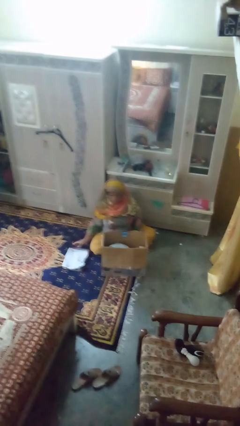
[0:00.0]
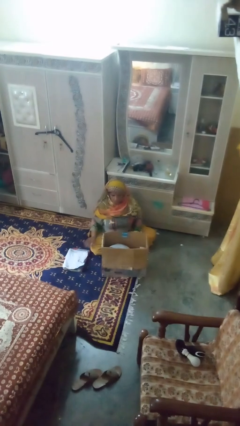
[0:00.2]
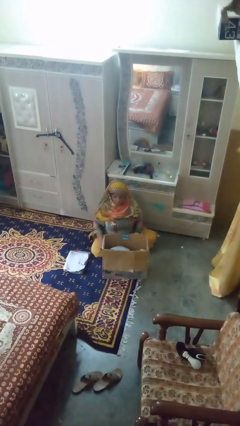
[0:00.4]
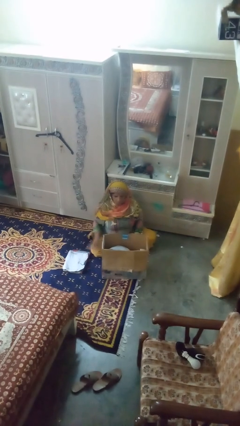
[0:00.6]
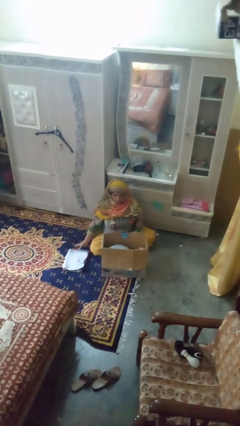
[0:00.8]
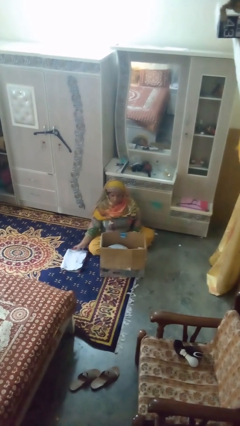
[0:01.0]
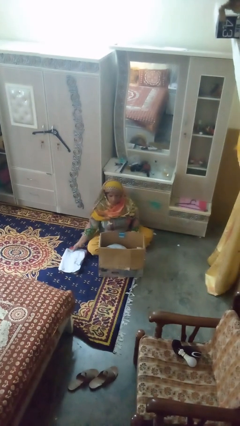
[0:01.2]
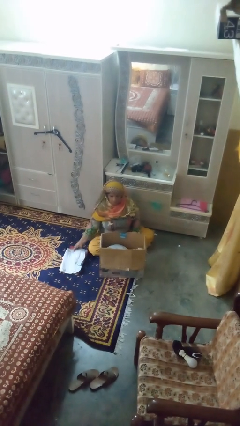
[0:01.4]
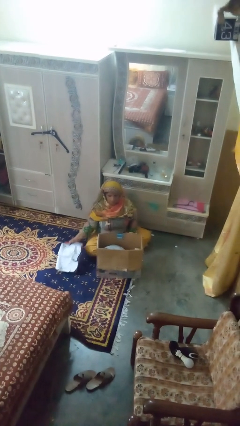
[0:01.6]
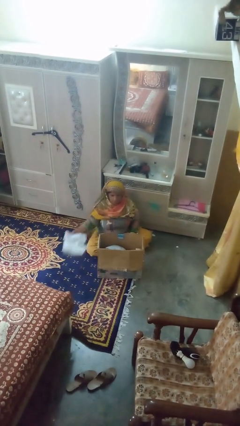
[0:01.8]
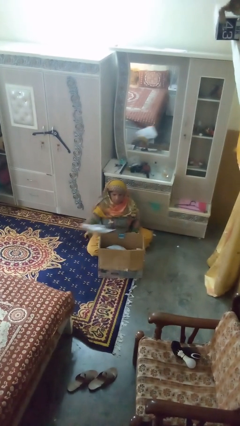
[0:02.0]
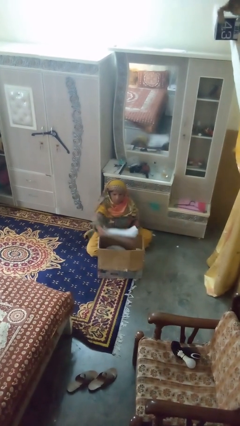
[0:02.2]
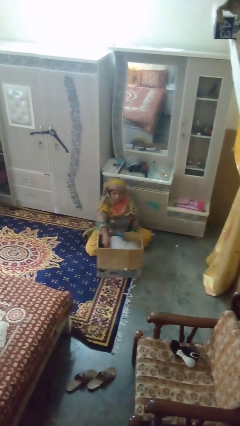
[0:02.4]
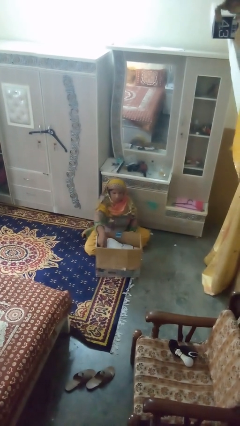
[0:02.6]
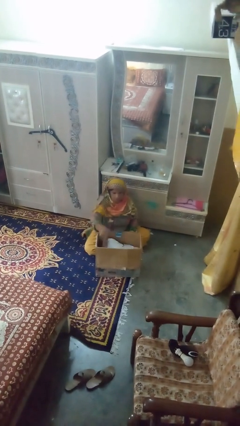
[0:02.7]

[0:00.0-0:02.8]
person puts object into box

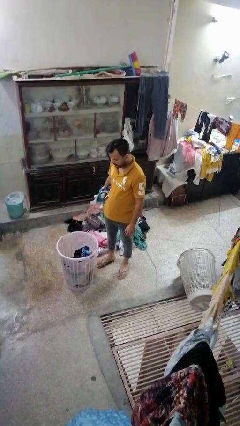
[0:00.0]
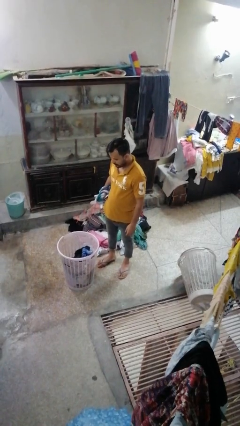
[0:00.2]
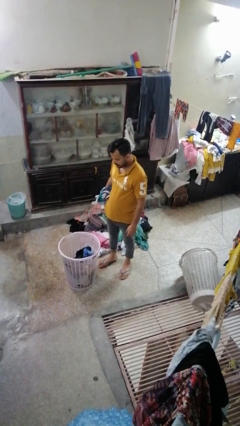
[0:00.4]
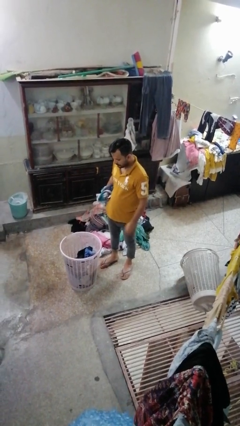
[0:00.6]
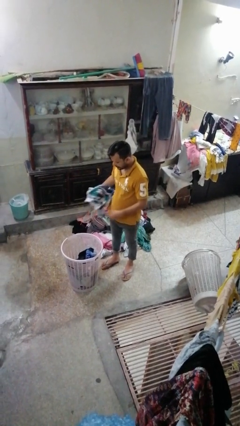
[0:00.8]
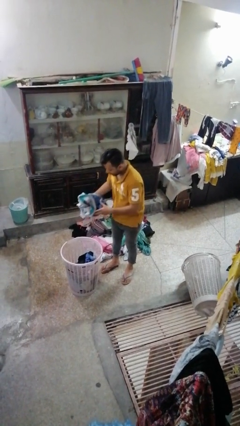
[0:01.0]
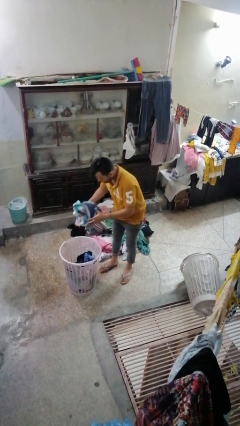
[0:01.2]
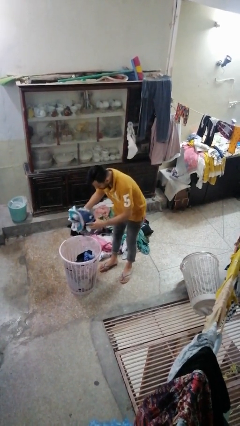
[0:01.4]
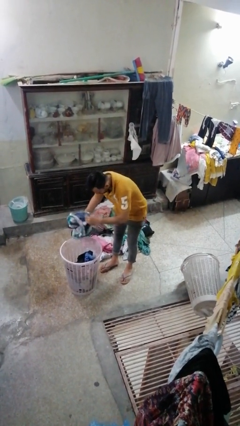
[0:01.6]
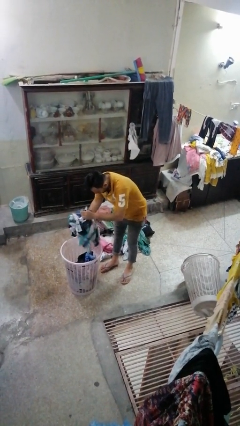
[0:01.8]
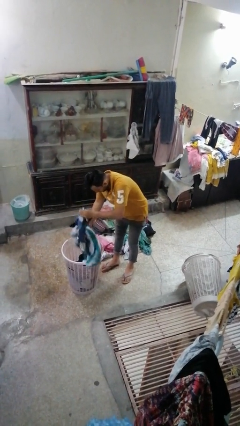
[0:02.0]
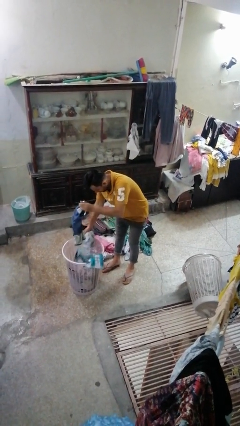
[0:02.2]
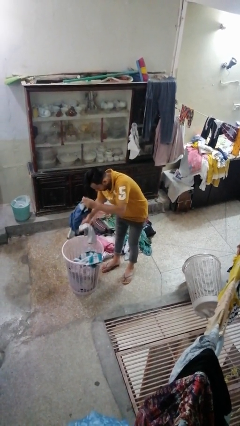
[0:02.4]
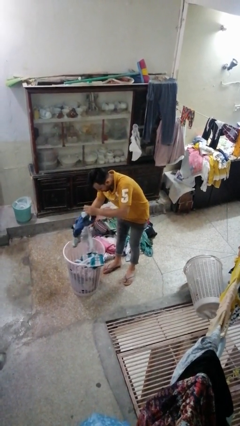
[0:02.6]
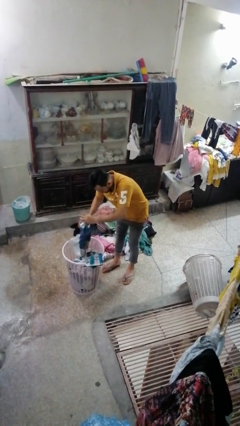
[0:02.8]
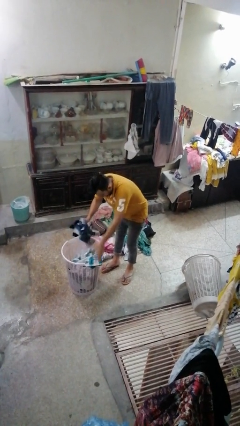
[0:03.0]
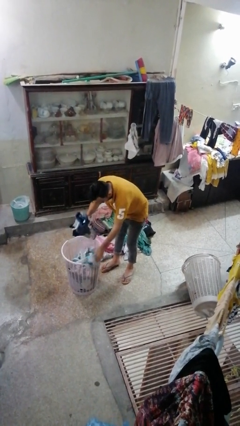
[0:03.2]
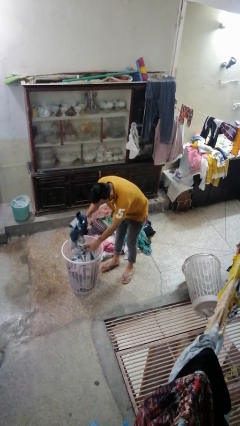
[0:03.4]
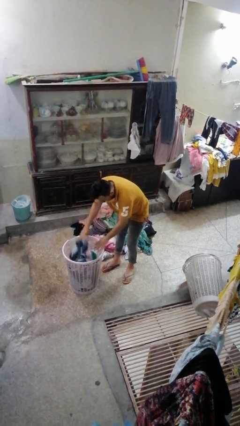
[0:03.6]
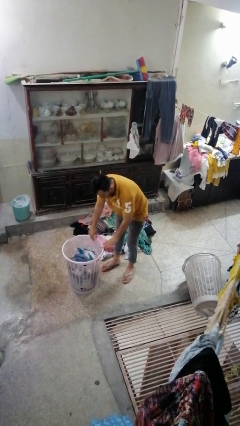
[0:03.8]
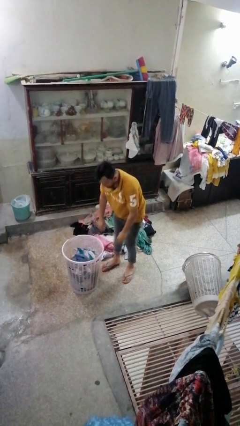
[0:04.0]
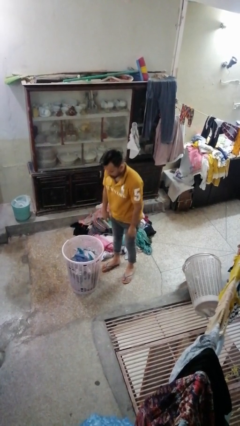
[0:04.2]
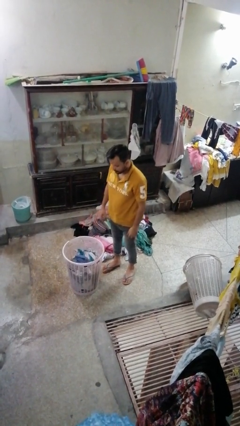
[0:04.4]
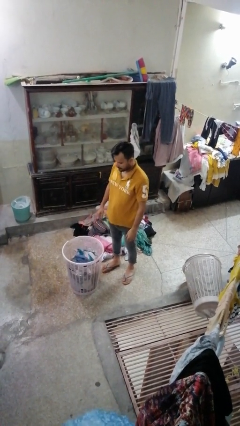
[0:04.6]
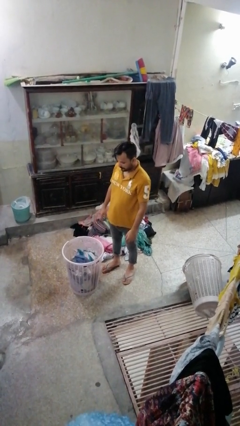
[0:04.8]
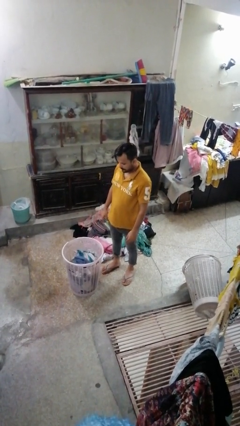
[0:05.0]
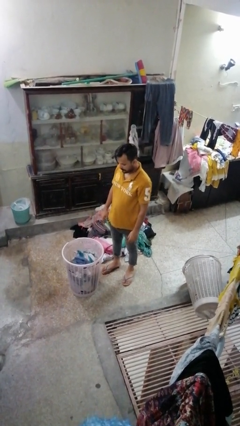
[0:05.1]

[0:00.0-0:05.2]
person puts object into basket

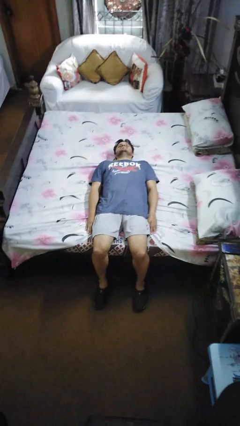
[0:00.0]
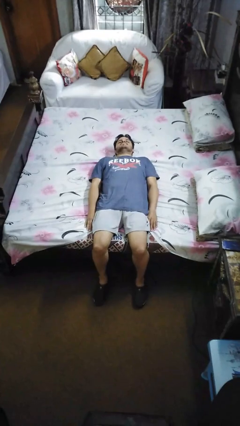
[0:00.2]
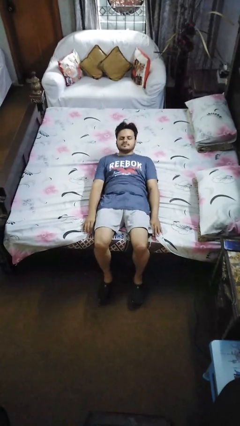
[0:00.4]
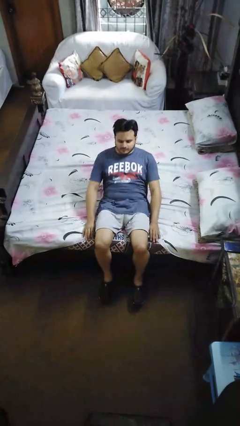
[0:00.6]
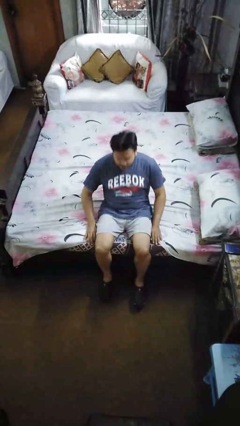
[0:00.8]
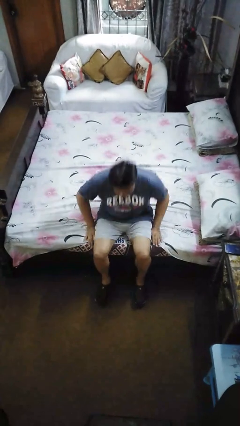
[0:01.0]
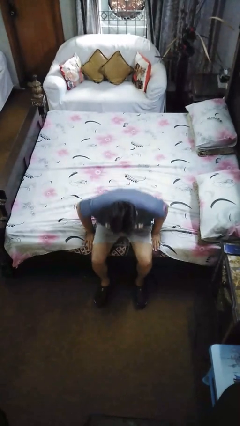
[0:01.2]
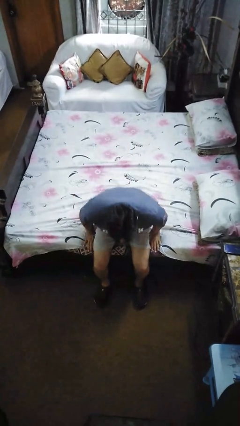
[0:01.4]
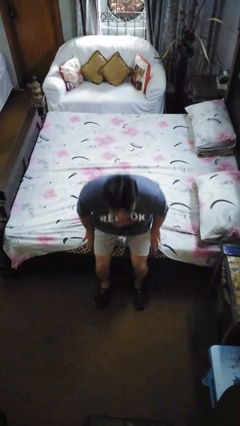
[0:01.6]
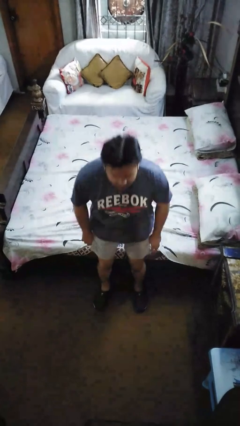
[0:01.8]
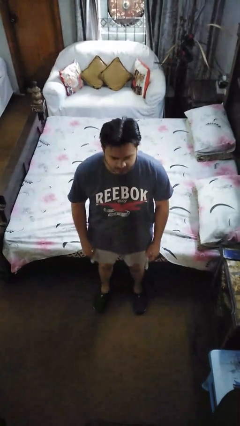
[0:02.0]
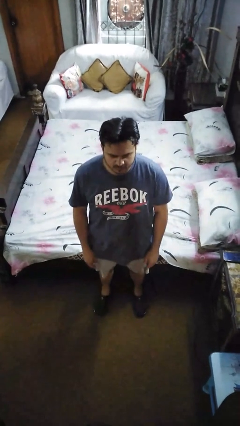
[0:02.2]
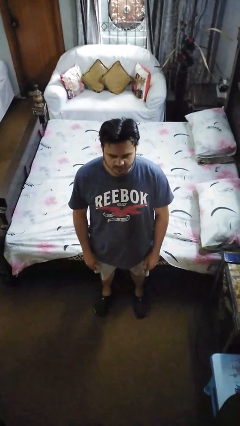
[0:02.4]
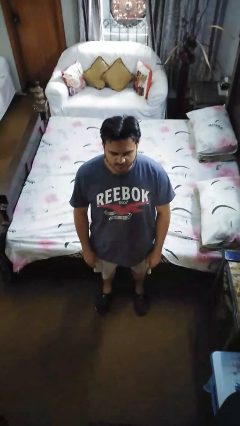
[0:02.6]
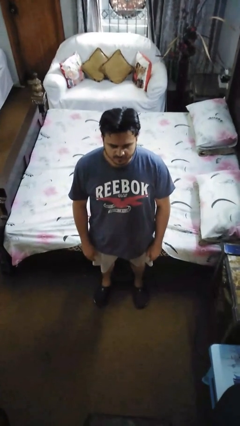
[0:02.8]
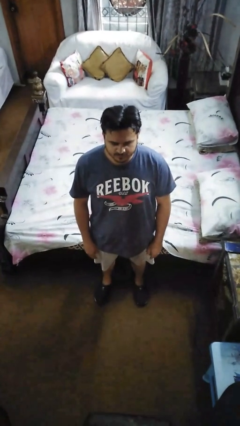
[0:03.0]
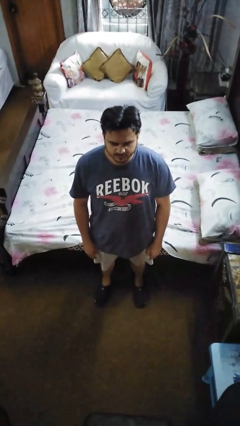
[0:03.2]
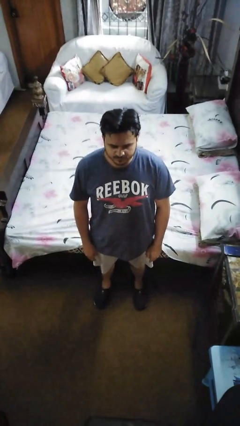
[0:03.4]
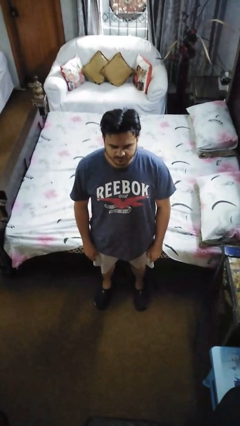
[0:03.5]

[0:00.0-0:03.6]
person stands up

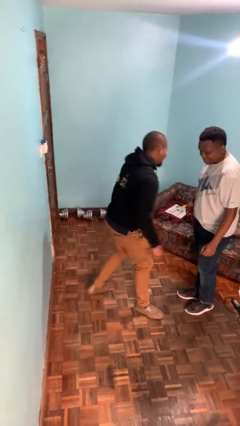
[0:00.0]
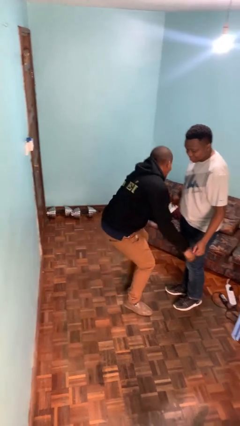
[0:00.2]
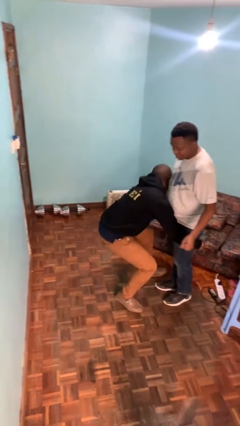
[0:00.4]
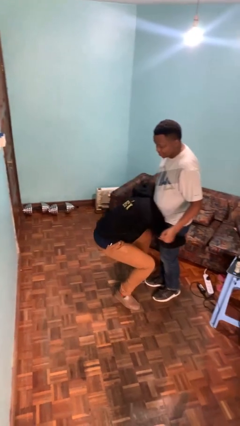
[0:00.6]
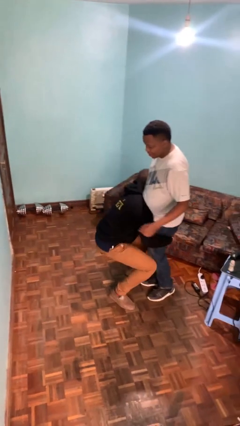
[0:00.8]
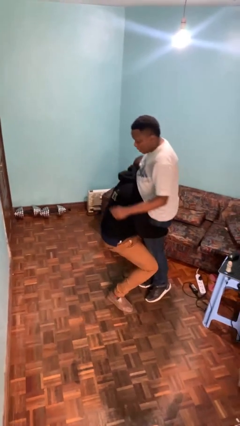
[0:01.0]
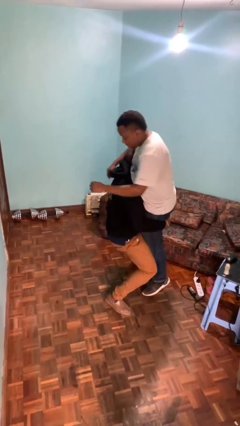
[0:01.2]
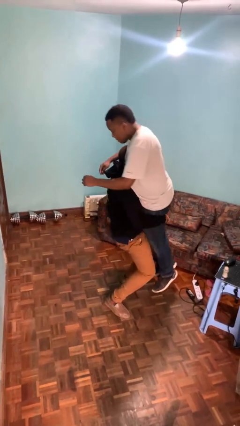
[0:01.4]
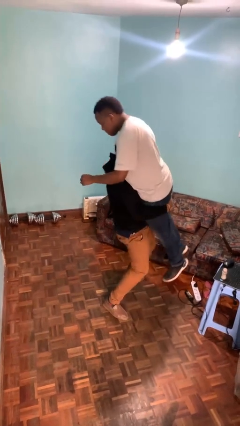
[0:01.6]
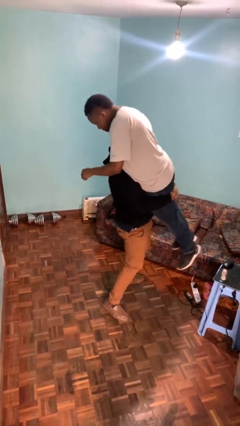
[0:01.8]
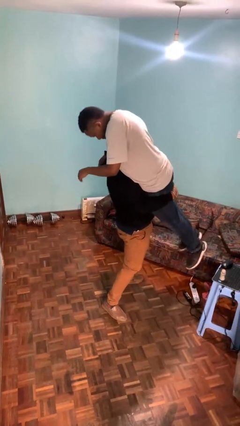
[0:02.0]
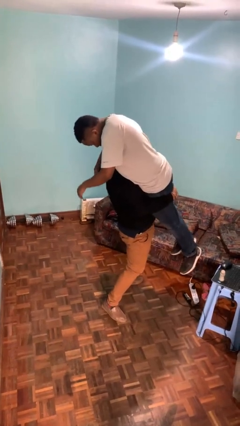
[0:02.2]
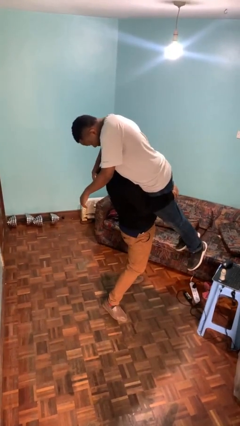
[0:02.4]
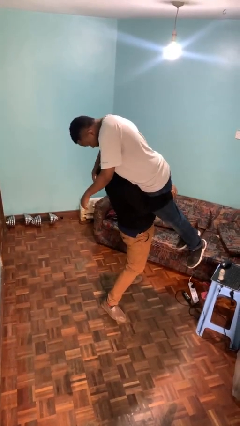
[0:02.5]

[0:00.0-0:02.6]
person carries person over shoulder

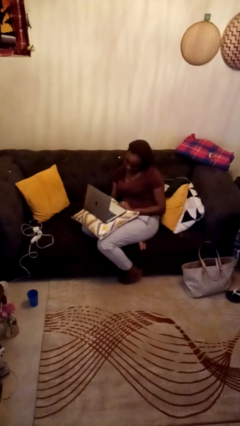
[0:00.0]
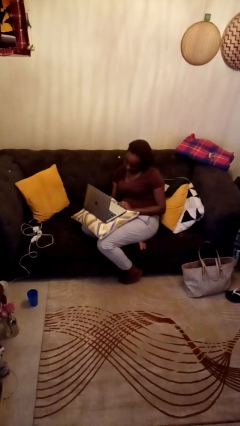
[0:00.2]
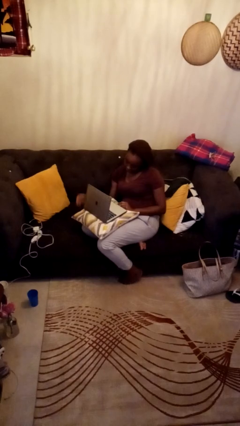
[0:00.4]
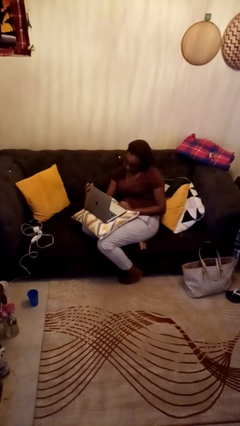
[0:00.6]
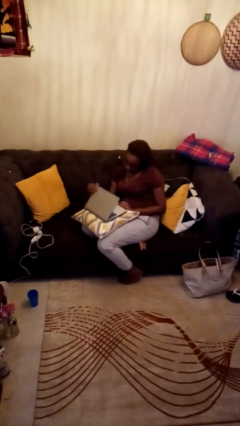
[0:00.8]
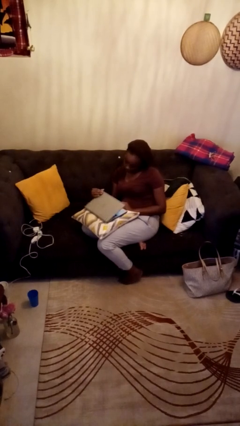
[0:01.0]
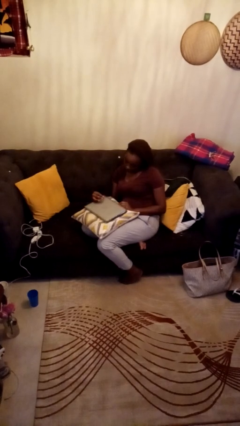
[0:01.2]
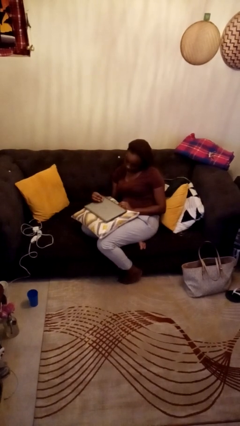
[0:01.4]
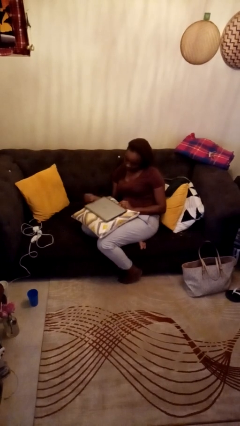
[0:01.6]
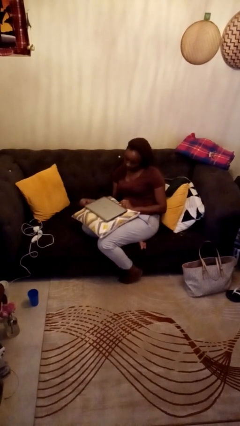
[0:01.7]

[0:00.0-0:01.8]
person closes laptop

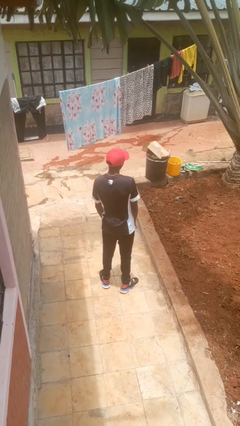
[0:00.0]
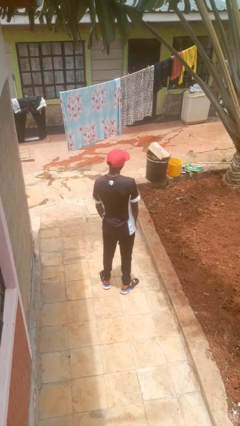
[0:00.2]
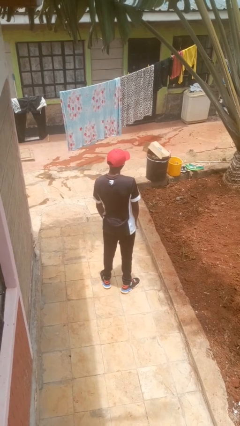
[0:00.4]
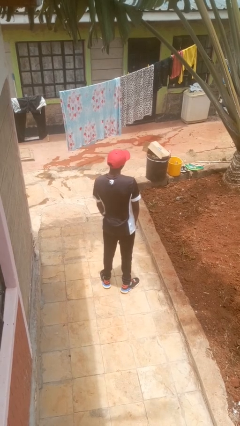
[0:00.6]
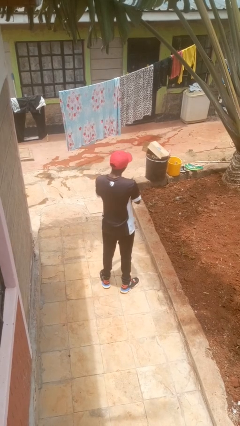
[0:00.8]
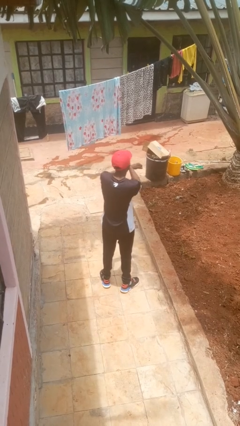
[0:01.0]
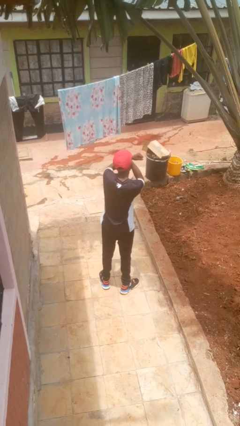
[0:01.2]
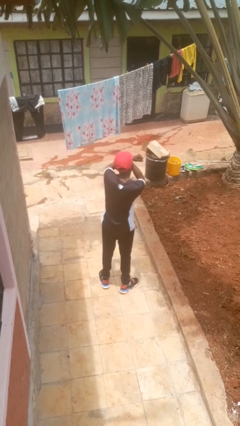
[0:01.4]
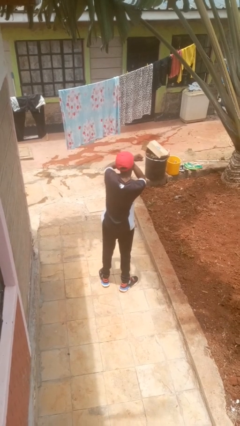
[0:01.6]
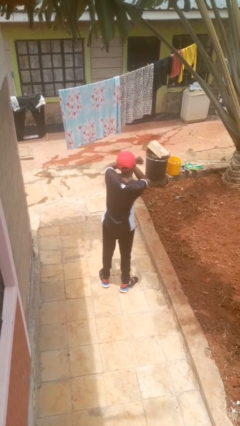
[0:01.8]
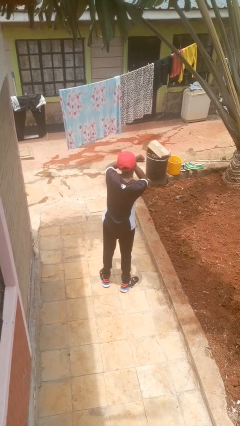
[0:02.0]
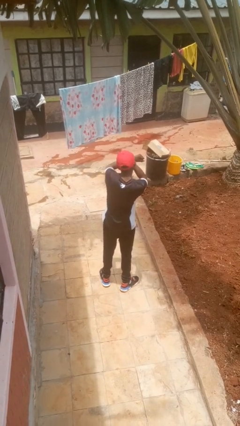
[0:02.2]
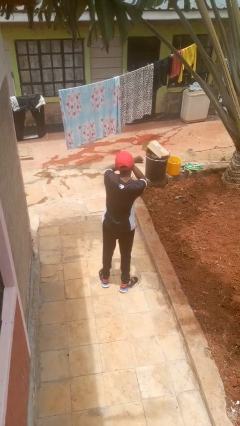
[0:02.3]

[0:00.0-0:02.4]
person gestures arms x
